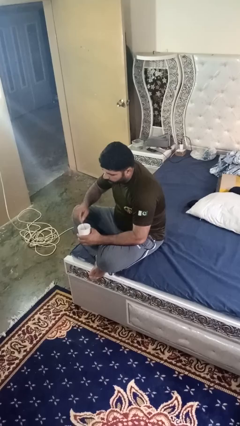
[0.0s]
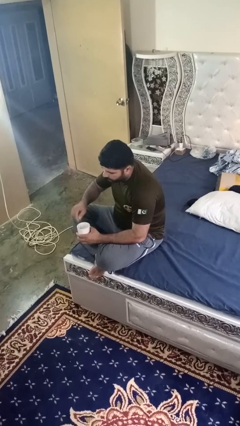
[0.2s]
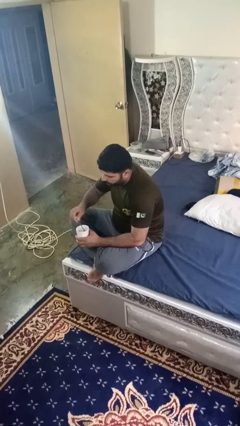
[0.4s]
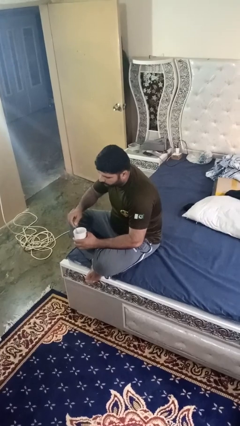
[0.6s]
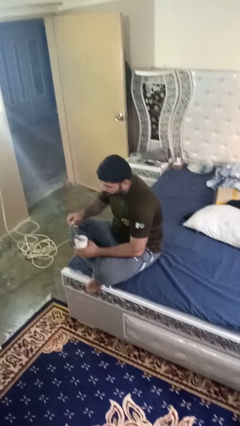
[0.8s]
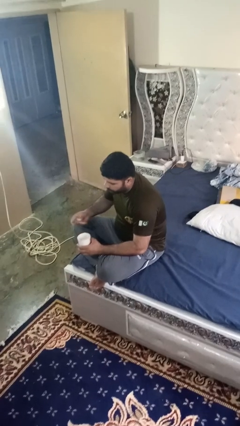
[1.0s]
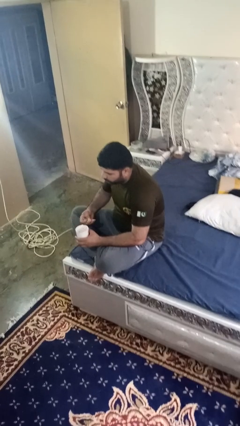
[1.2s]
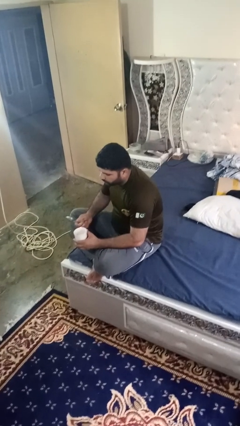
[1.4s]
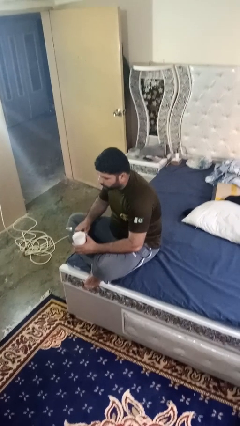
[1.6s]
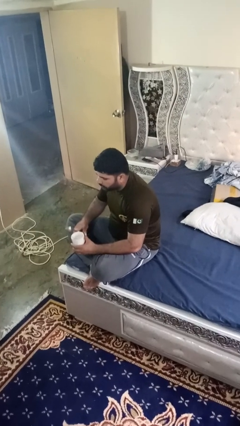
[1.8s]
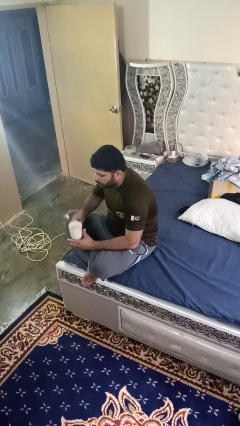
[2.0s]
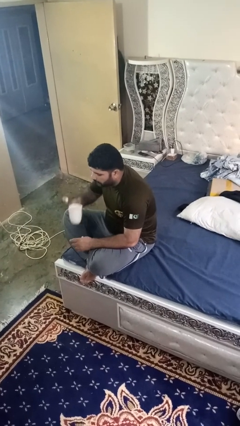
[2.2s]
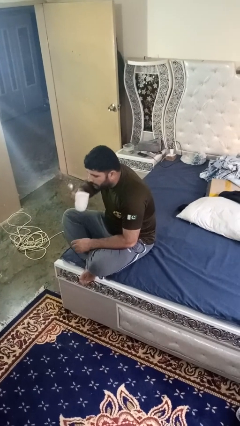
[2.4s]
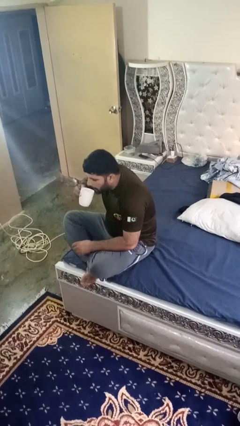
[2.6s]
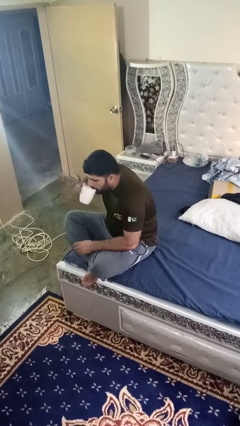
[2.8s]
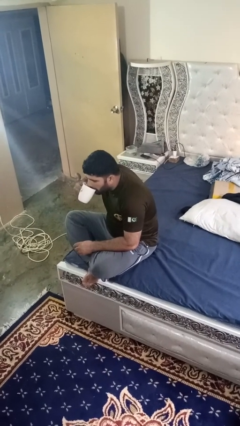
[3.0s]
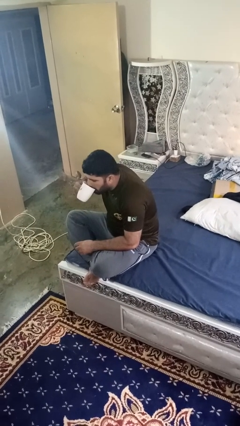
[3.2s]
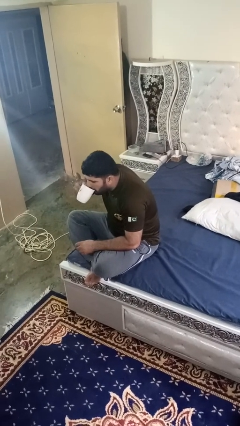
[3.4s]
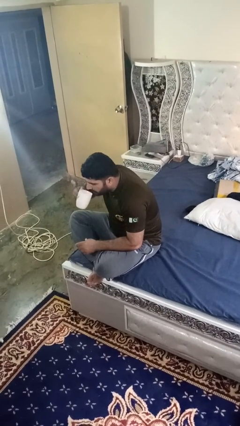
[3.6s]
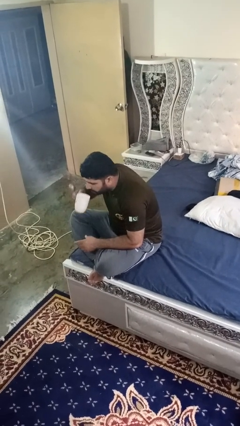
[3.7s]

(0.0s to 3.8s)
person drinks from mug

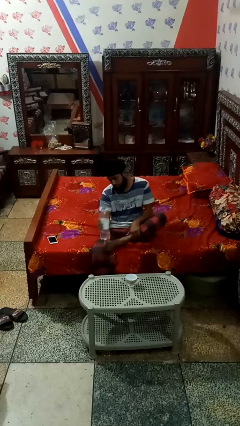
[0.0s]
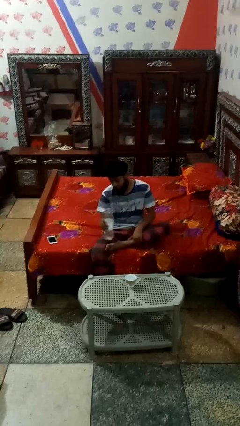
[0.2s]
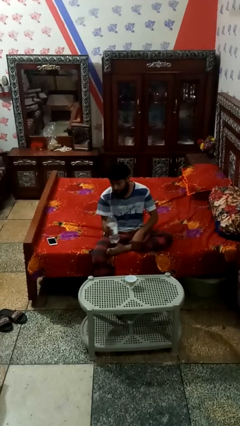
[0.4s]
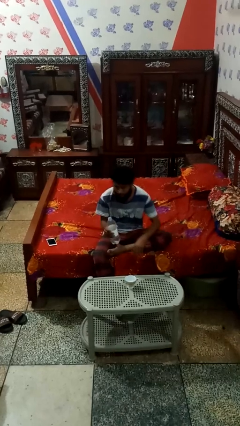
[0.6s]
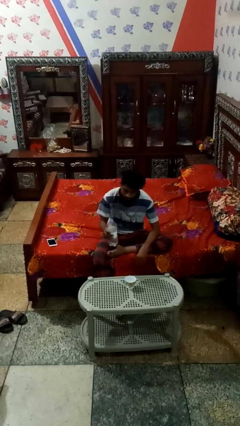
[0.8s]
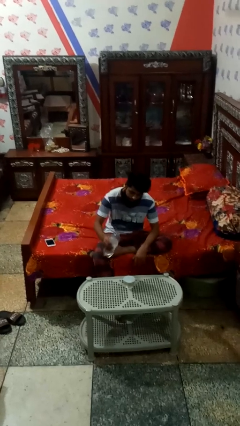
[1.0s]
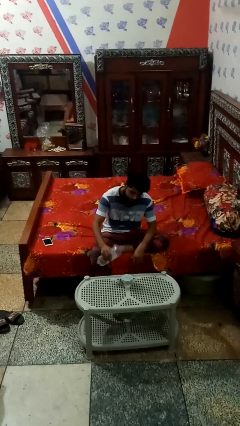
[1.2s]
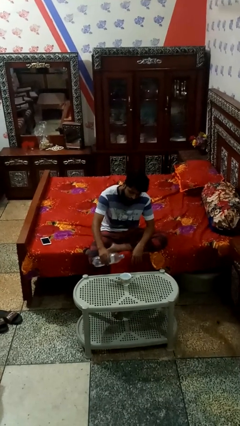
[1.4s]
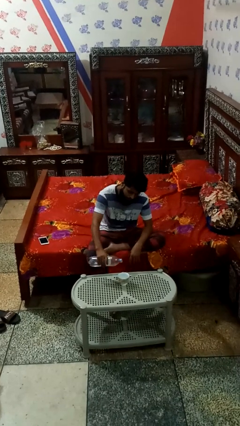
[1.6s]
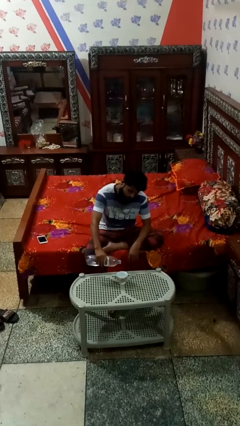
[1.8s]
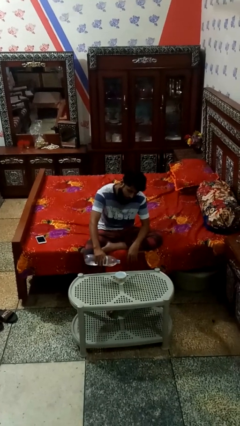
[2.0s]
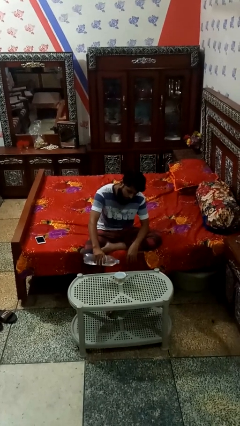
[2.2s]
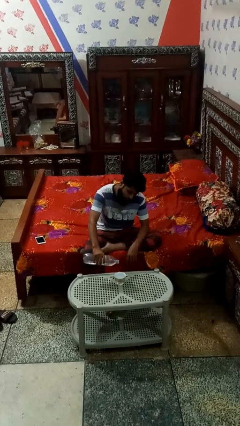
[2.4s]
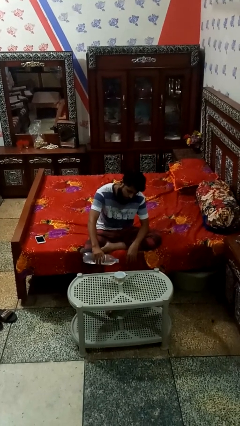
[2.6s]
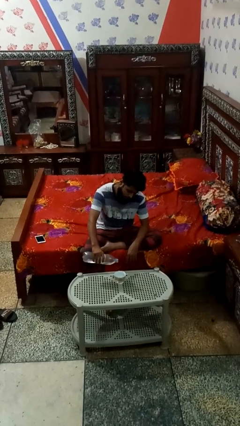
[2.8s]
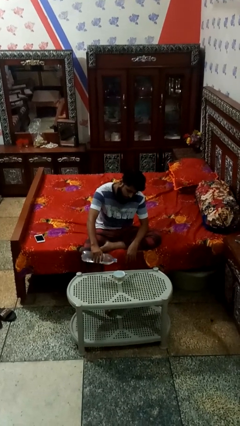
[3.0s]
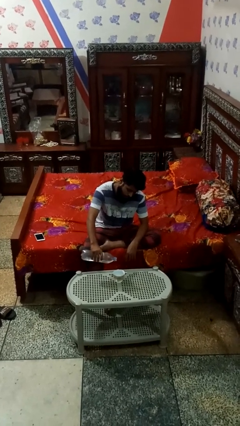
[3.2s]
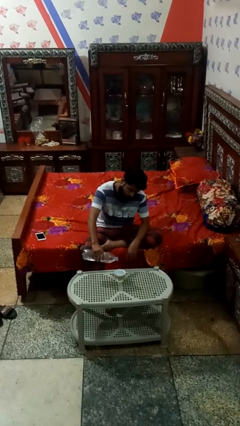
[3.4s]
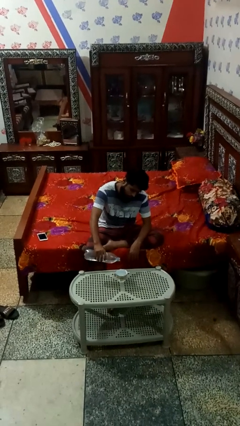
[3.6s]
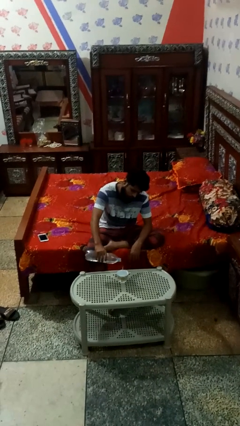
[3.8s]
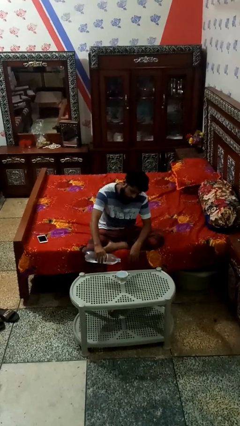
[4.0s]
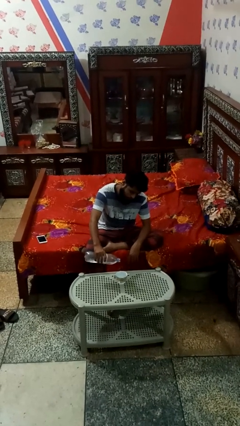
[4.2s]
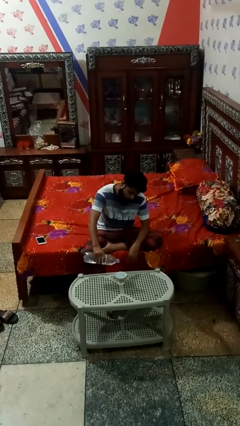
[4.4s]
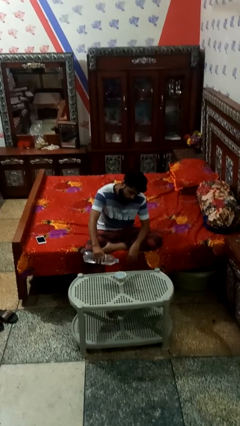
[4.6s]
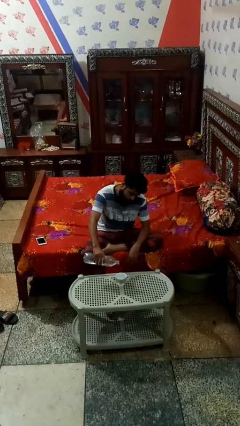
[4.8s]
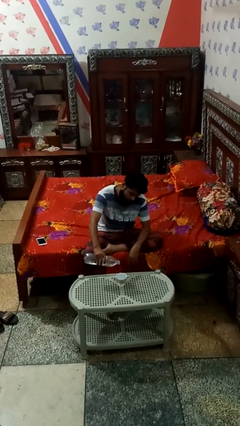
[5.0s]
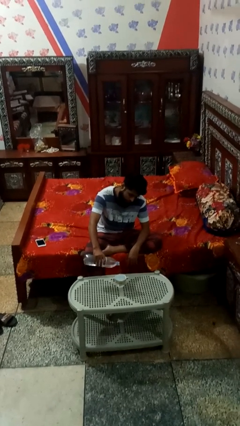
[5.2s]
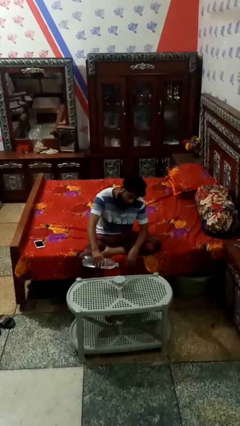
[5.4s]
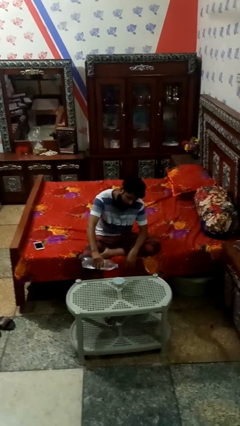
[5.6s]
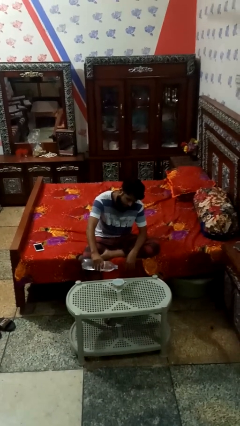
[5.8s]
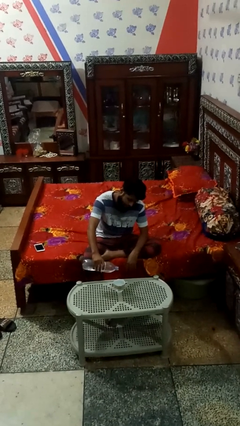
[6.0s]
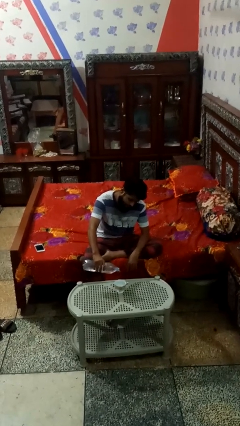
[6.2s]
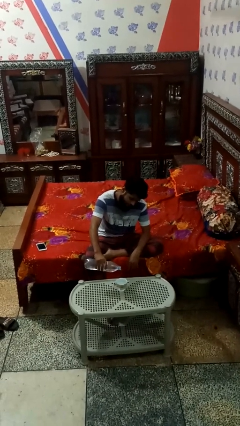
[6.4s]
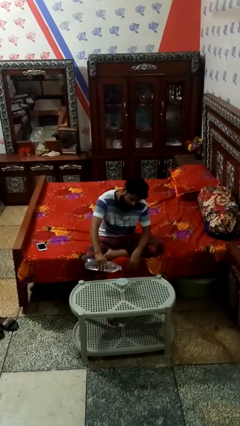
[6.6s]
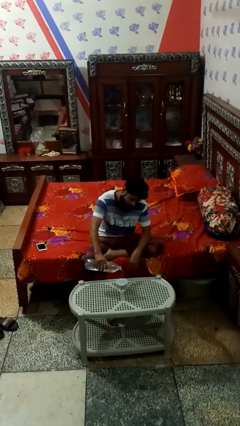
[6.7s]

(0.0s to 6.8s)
person pours liquid into cup

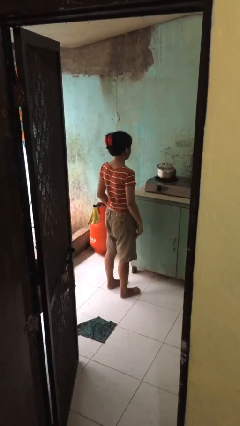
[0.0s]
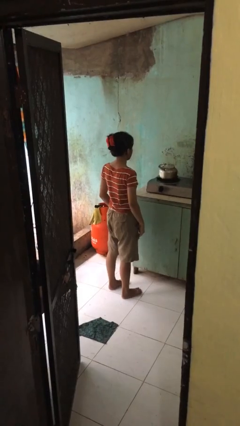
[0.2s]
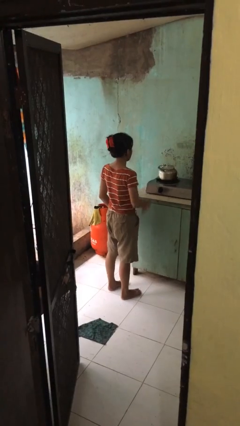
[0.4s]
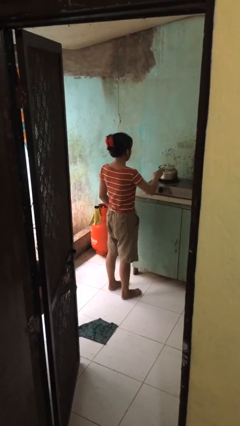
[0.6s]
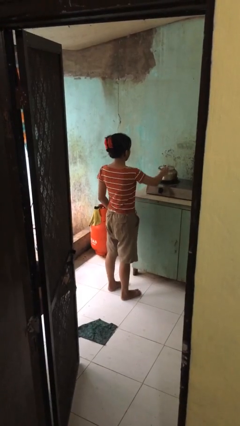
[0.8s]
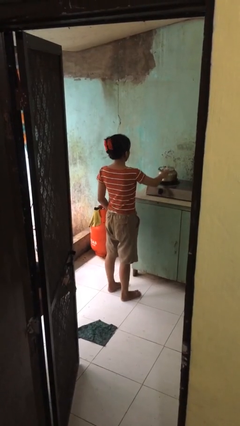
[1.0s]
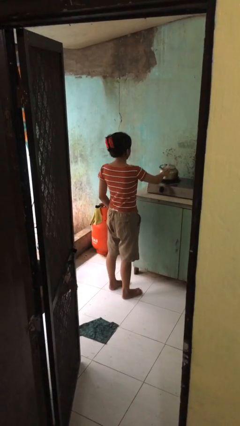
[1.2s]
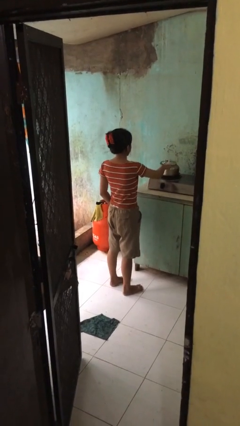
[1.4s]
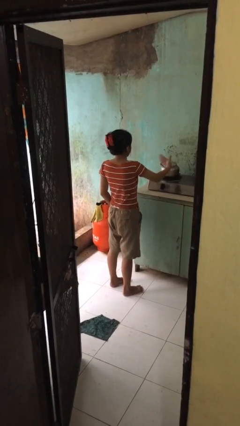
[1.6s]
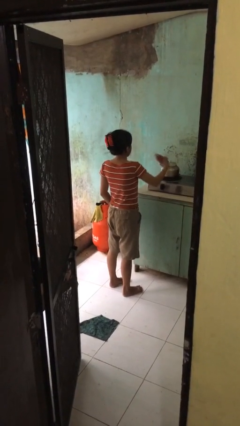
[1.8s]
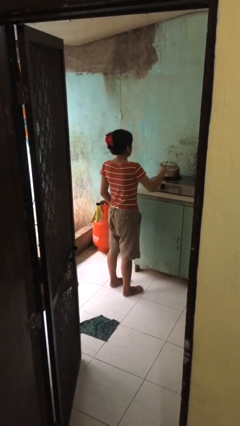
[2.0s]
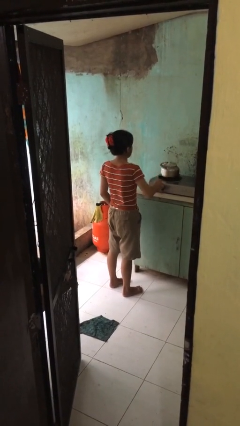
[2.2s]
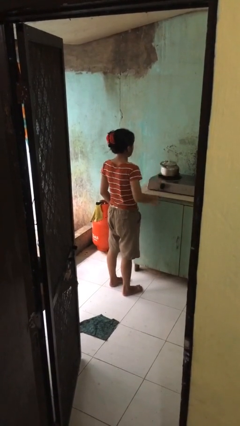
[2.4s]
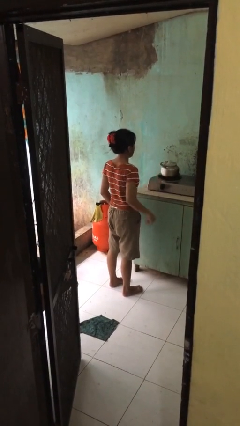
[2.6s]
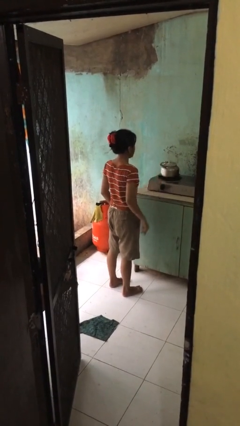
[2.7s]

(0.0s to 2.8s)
person burns hand

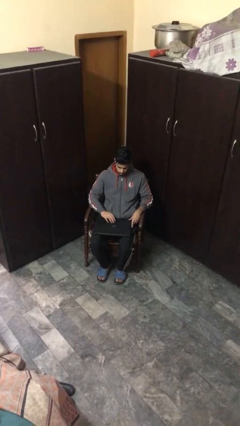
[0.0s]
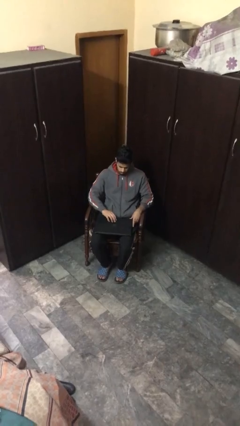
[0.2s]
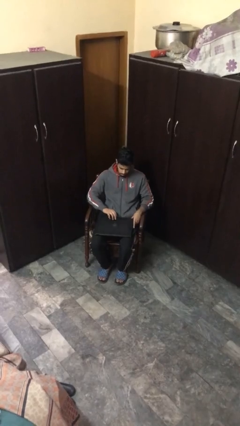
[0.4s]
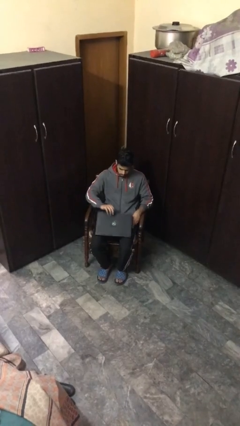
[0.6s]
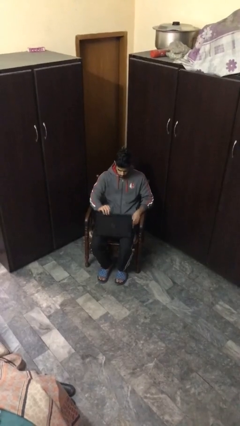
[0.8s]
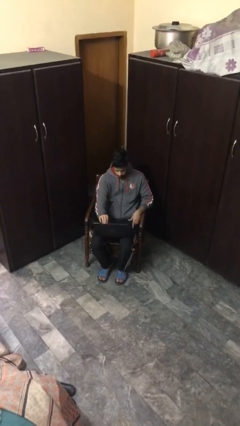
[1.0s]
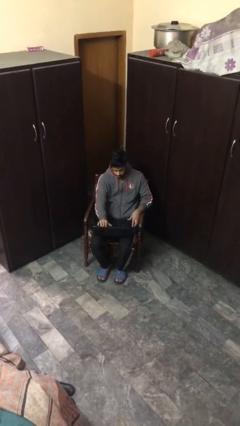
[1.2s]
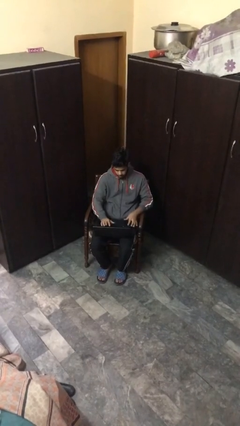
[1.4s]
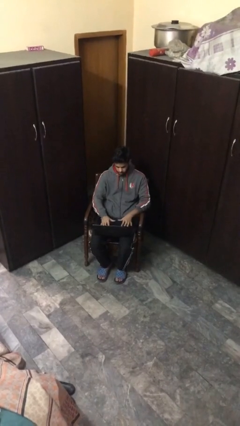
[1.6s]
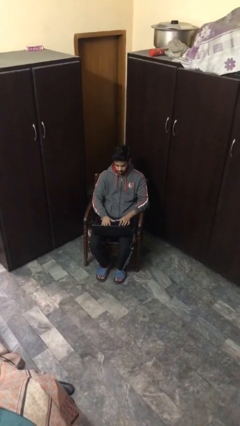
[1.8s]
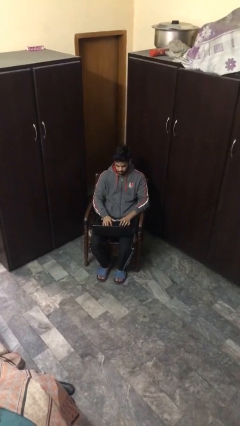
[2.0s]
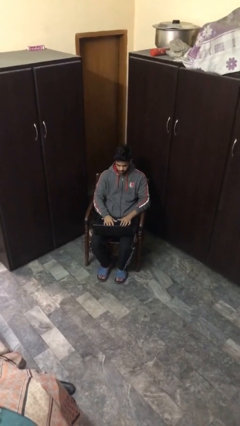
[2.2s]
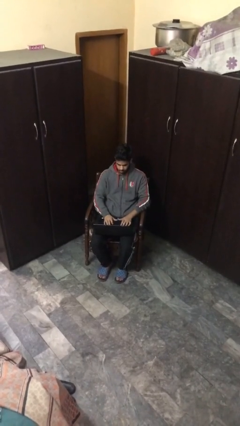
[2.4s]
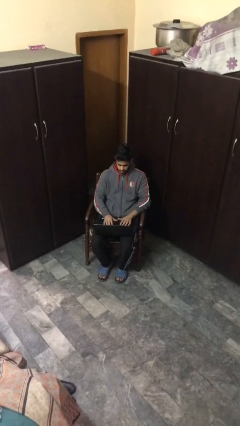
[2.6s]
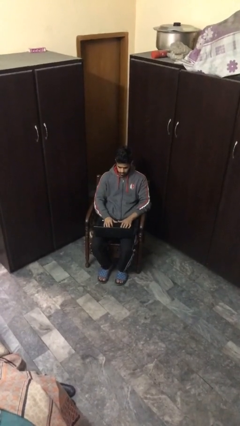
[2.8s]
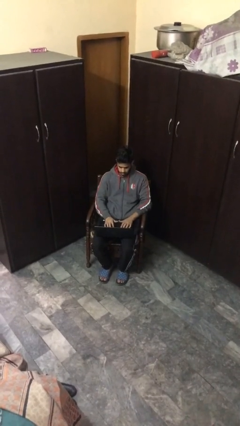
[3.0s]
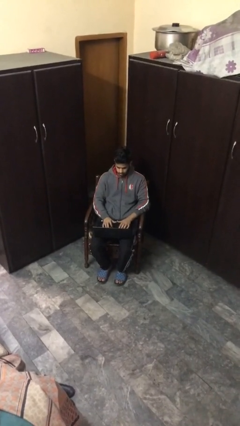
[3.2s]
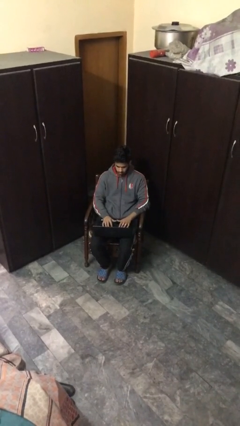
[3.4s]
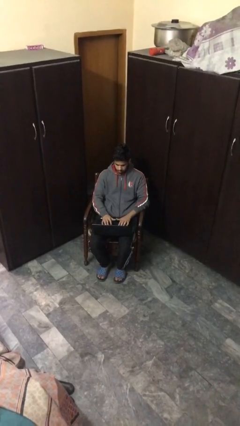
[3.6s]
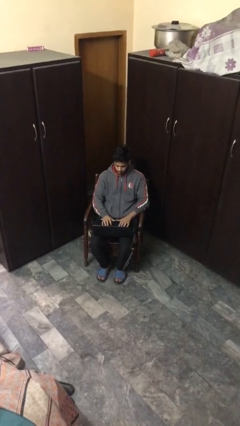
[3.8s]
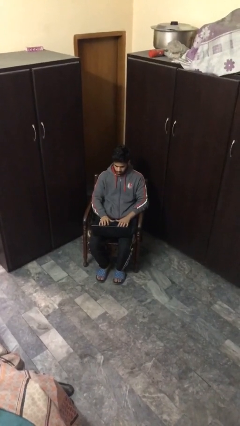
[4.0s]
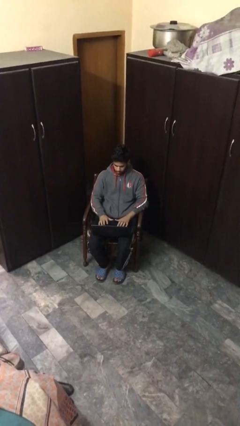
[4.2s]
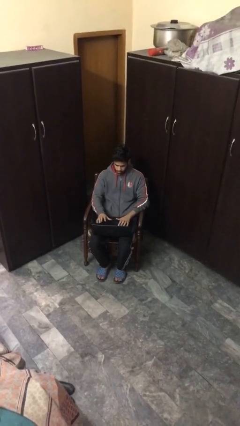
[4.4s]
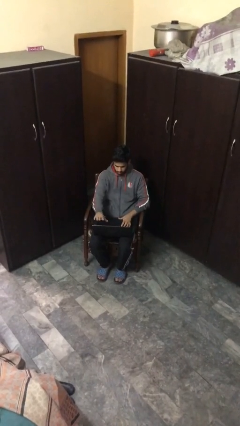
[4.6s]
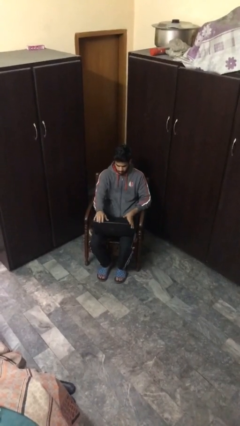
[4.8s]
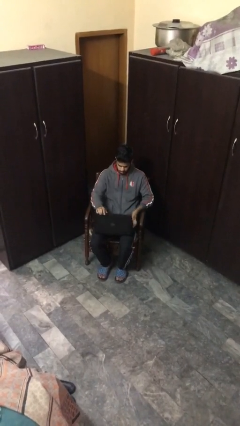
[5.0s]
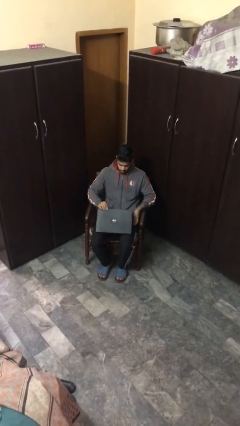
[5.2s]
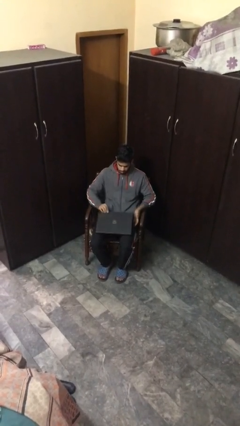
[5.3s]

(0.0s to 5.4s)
person interacts with laptop
